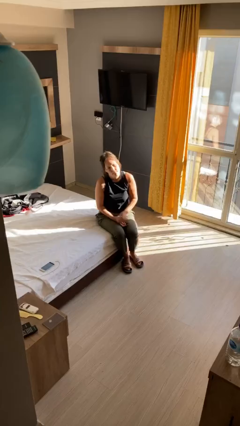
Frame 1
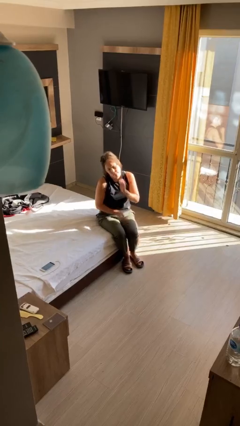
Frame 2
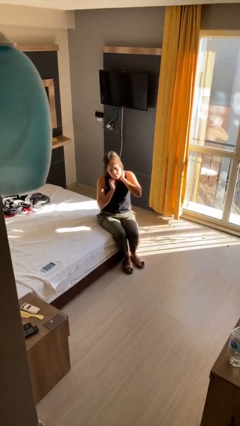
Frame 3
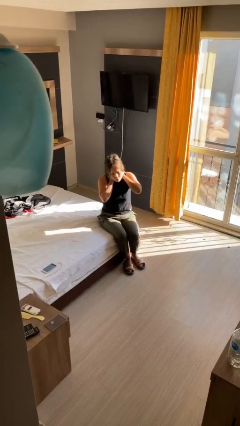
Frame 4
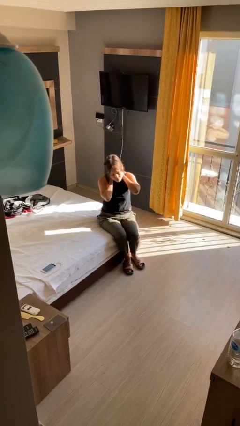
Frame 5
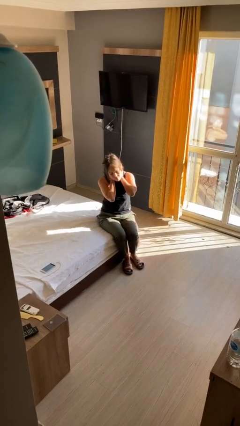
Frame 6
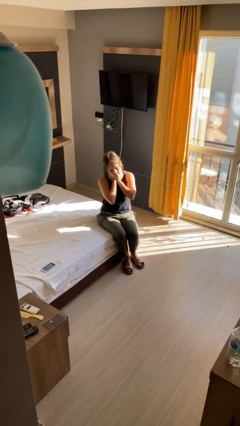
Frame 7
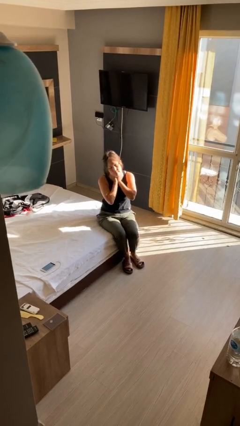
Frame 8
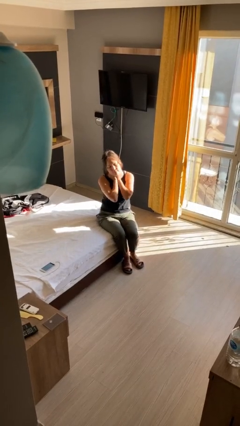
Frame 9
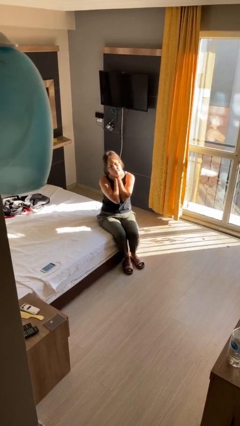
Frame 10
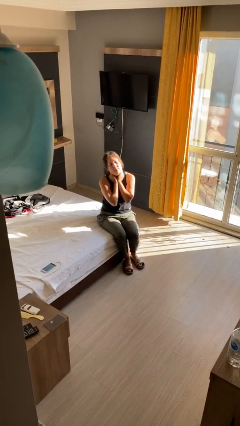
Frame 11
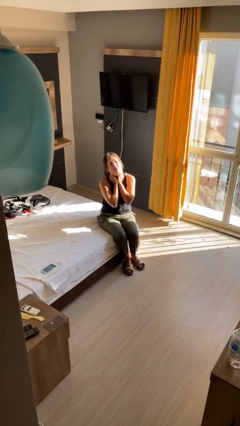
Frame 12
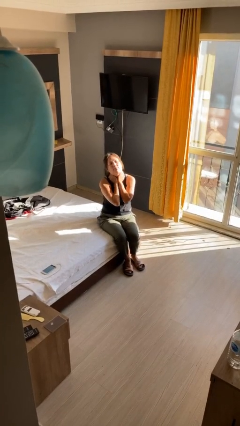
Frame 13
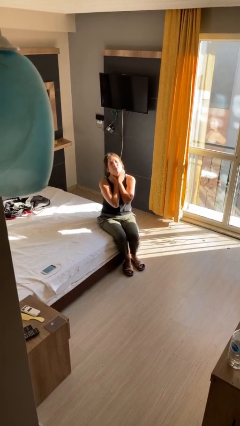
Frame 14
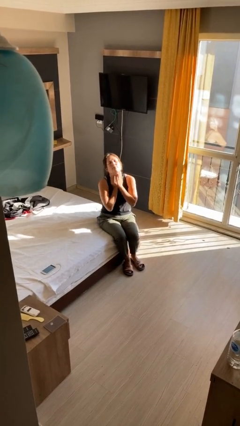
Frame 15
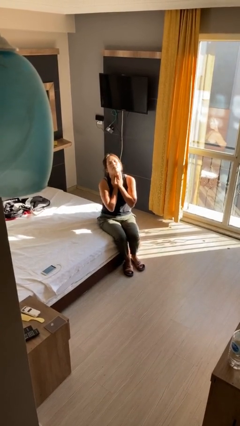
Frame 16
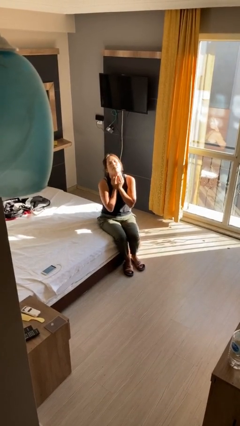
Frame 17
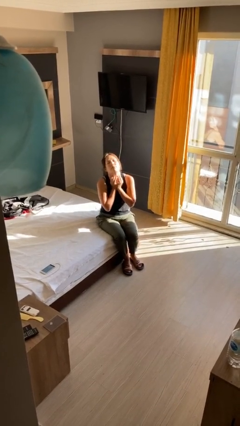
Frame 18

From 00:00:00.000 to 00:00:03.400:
person rubs neck

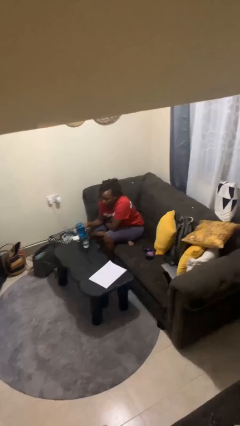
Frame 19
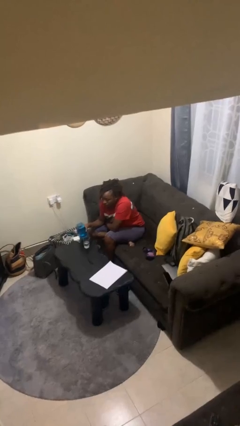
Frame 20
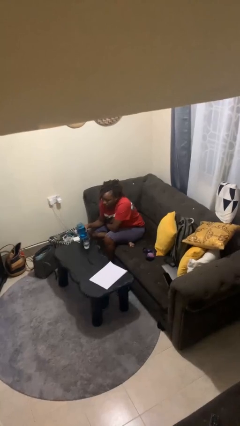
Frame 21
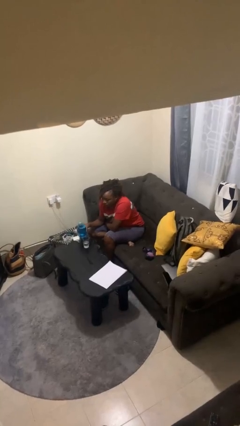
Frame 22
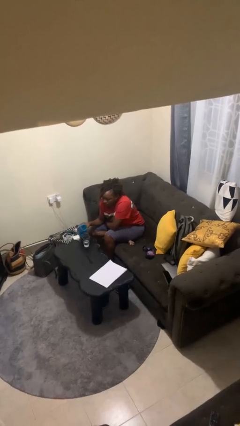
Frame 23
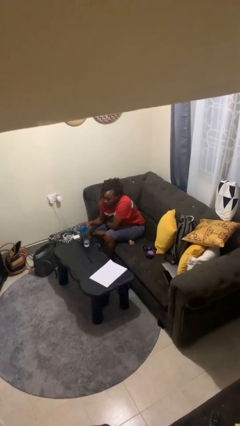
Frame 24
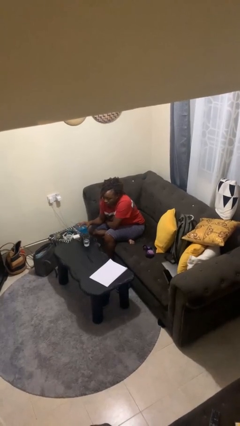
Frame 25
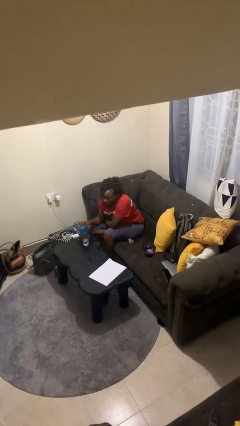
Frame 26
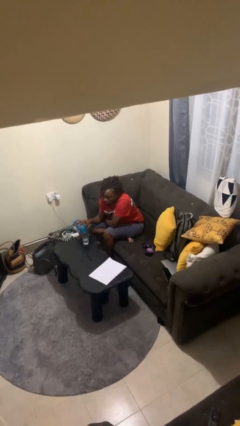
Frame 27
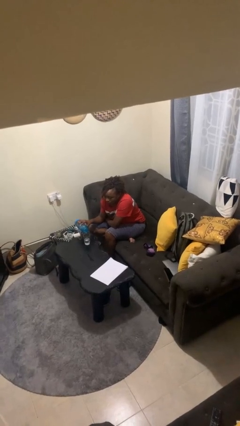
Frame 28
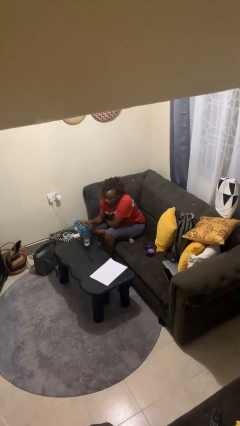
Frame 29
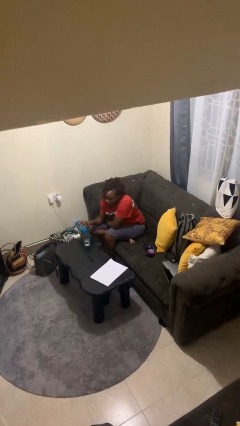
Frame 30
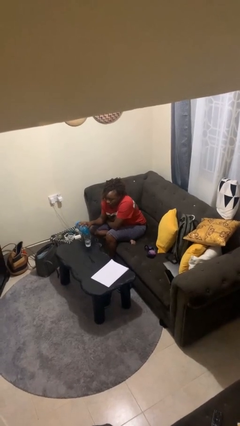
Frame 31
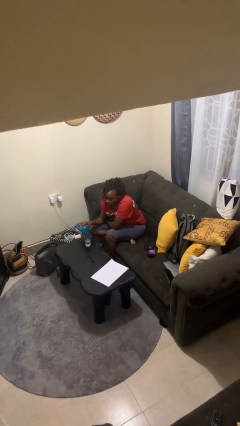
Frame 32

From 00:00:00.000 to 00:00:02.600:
person pours liquid into cup

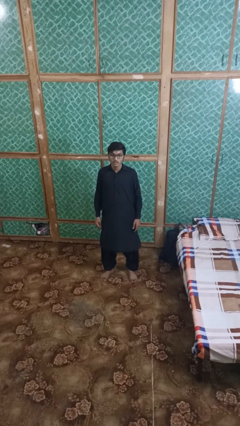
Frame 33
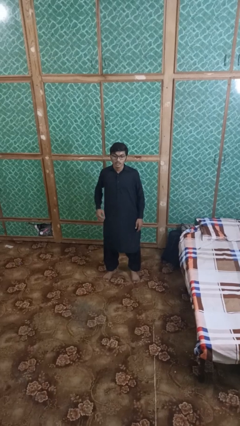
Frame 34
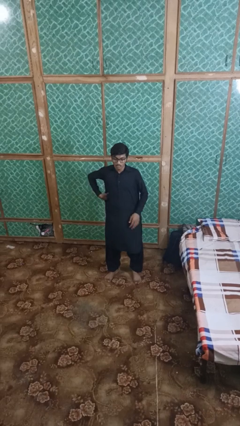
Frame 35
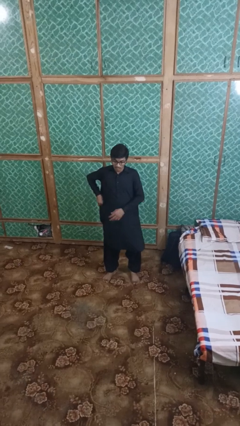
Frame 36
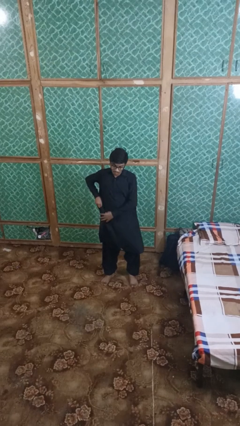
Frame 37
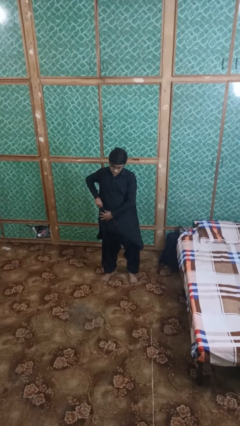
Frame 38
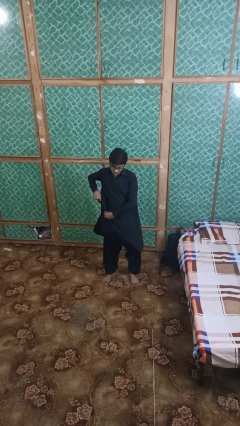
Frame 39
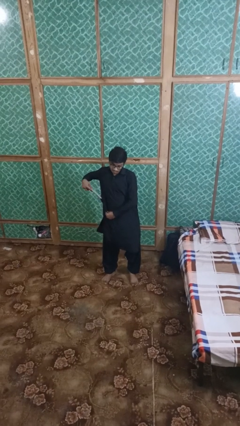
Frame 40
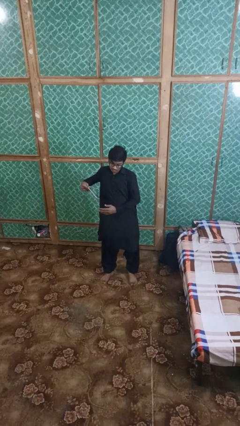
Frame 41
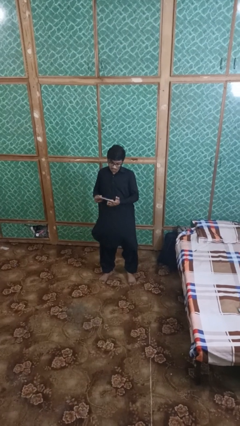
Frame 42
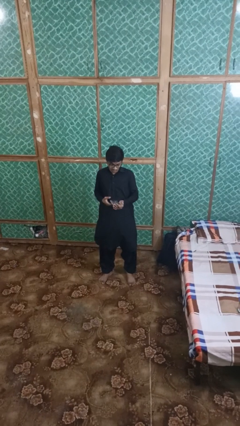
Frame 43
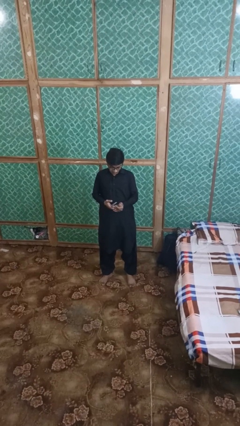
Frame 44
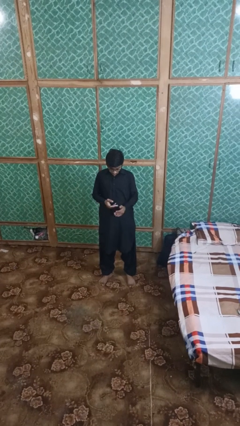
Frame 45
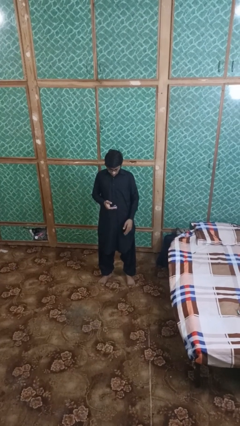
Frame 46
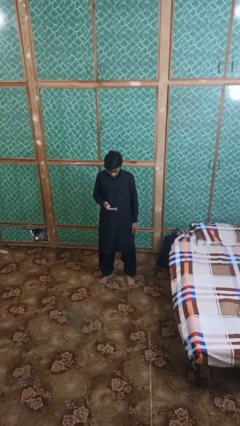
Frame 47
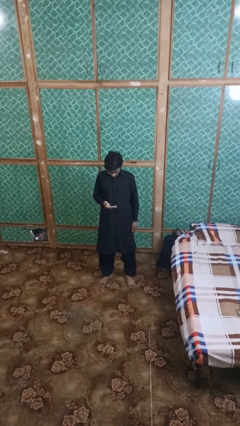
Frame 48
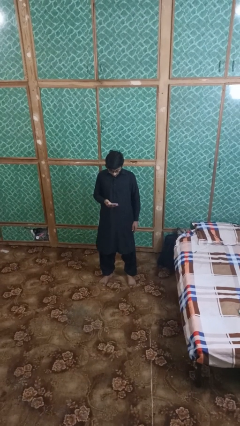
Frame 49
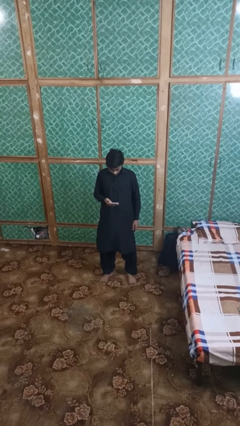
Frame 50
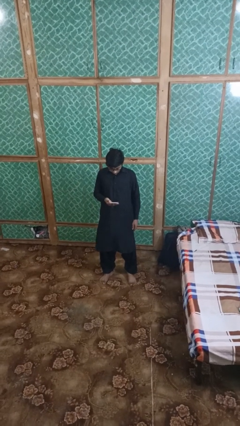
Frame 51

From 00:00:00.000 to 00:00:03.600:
person takes phone from pocket

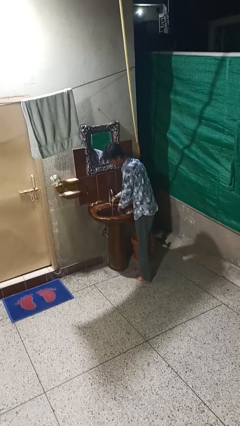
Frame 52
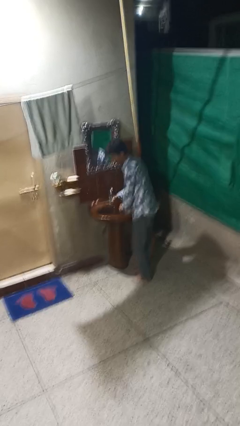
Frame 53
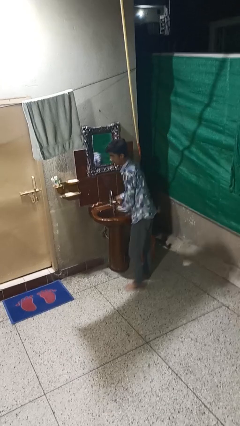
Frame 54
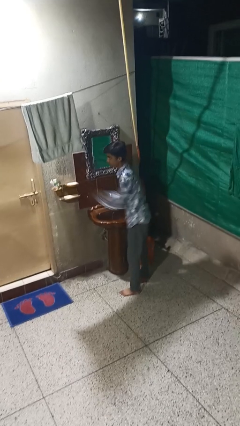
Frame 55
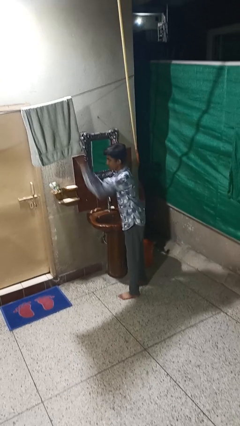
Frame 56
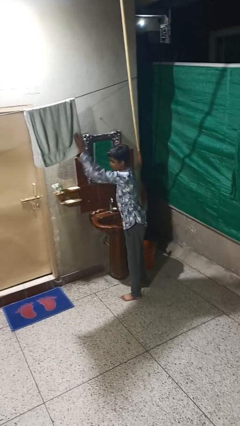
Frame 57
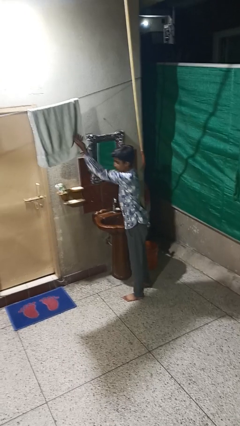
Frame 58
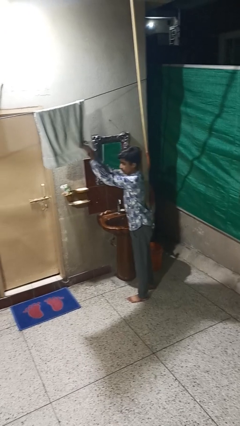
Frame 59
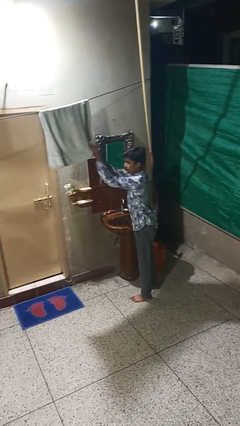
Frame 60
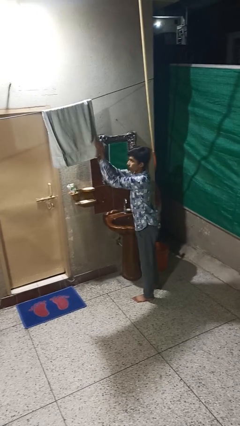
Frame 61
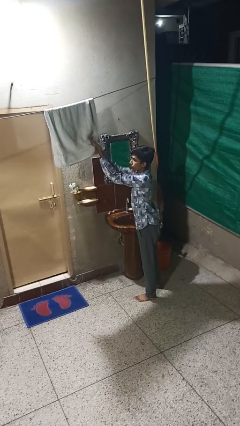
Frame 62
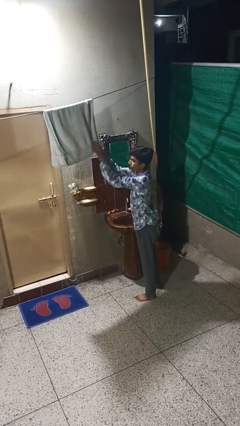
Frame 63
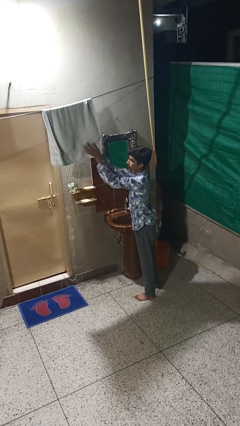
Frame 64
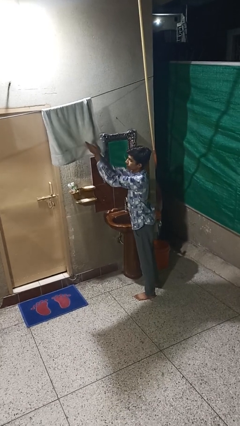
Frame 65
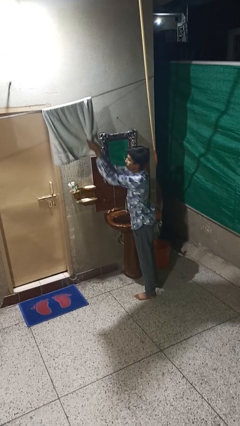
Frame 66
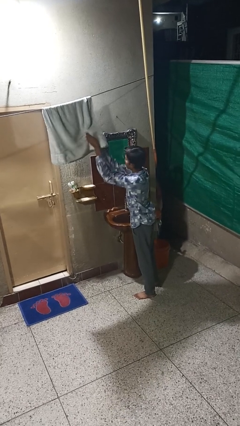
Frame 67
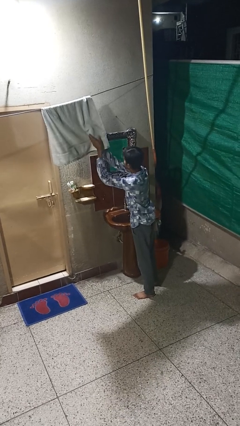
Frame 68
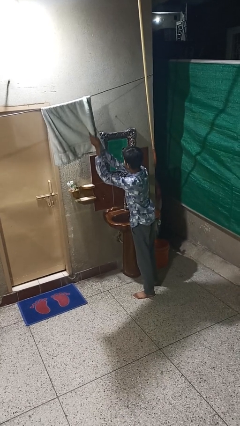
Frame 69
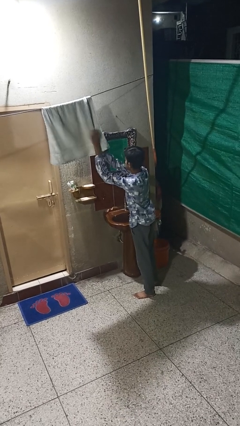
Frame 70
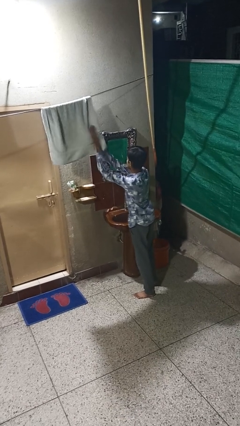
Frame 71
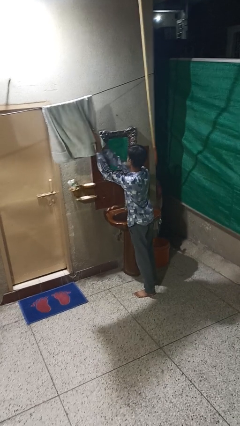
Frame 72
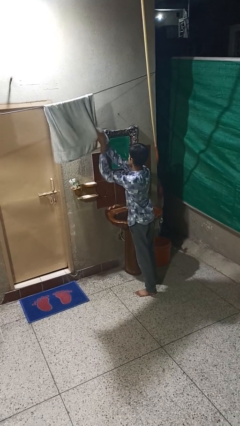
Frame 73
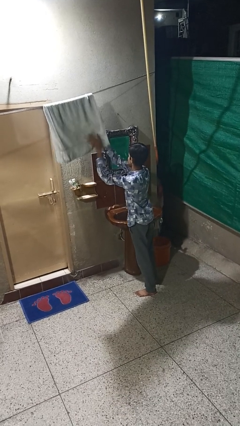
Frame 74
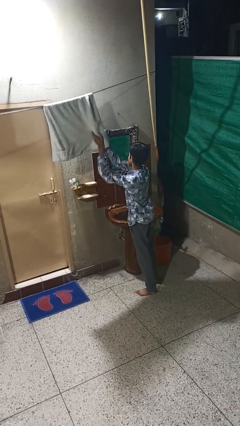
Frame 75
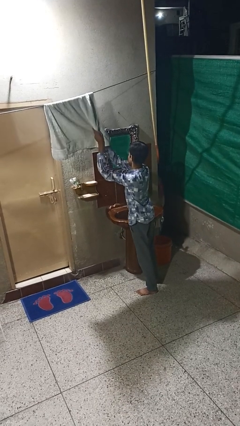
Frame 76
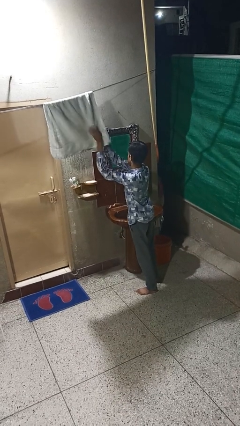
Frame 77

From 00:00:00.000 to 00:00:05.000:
person dries hands with towel

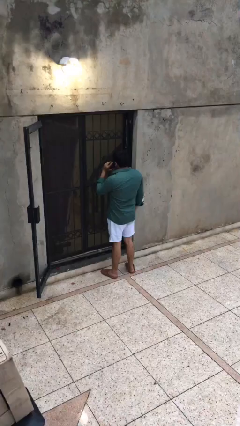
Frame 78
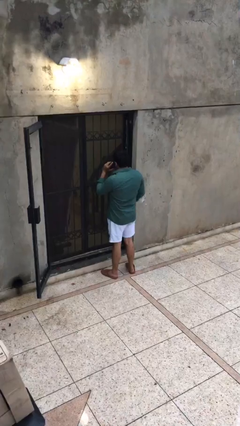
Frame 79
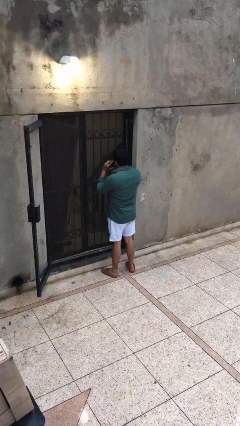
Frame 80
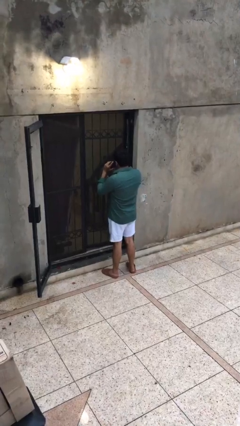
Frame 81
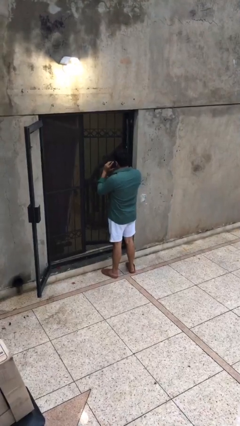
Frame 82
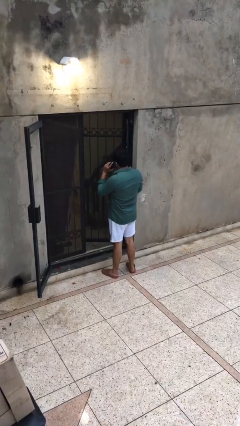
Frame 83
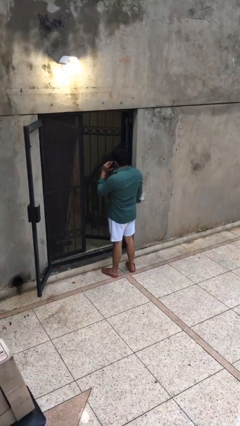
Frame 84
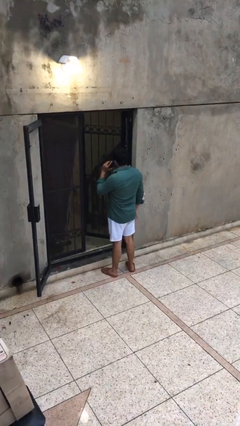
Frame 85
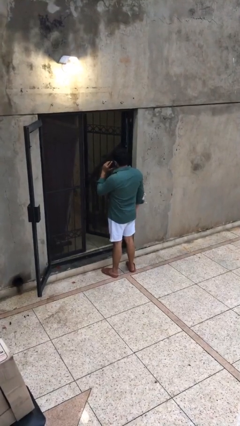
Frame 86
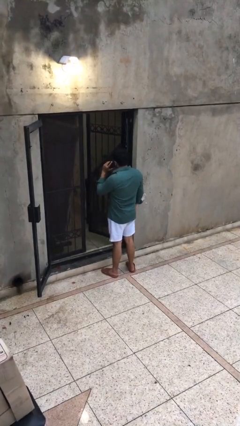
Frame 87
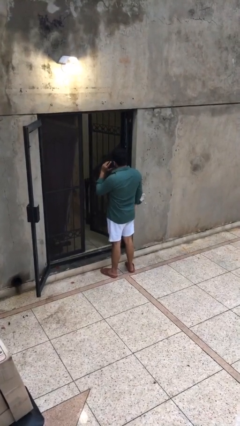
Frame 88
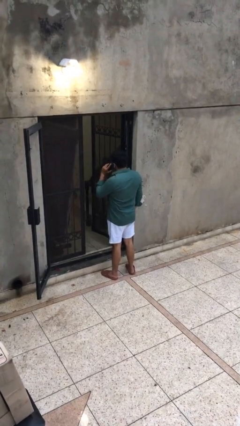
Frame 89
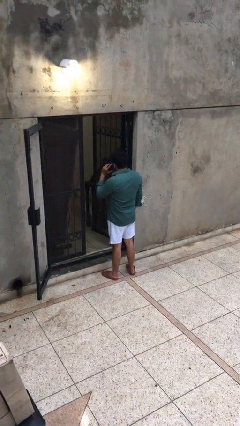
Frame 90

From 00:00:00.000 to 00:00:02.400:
person opens facility door

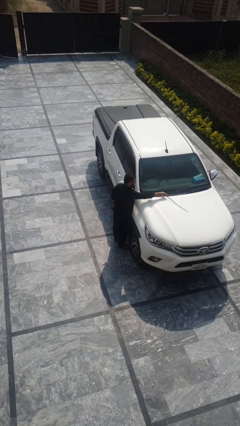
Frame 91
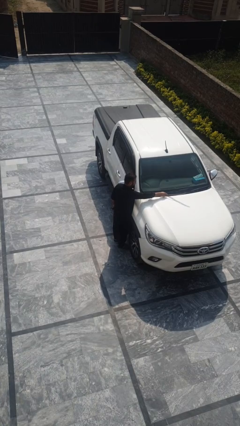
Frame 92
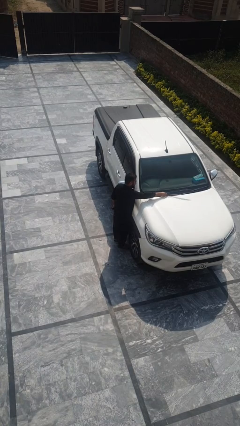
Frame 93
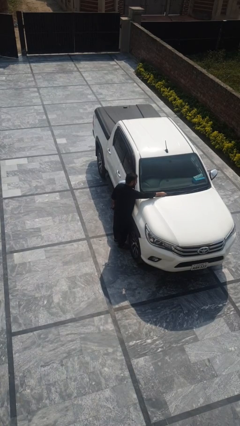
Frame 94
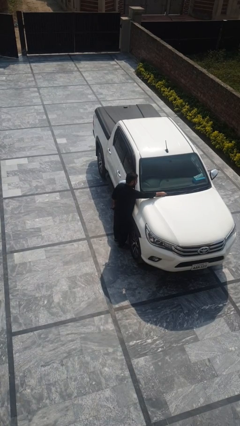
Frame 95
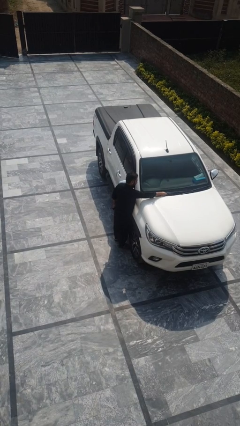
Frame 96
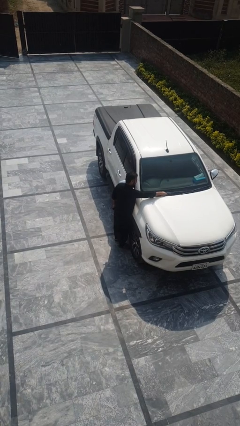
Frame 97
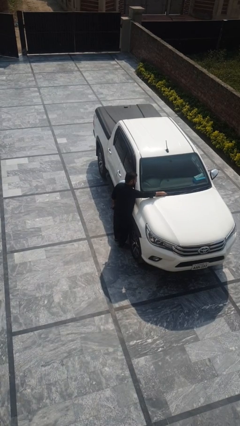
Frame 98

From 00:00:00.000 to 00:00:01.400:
person flips down car wipers
